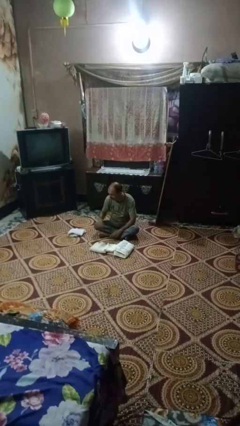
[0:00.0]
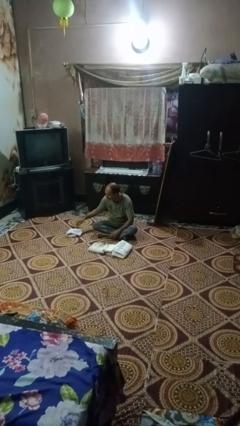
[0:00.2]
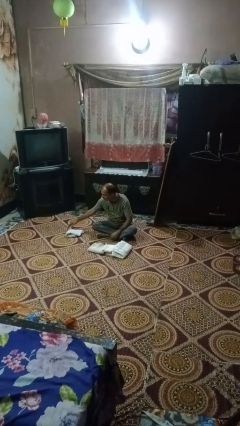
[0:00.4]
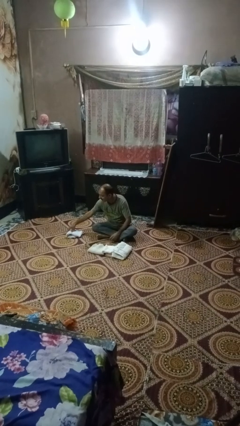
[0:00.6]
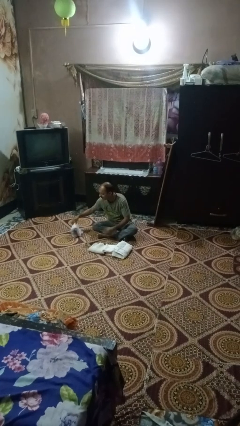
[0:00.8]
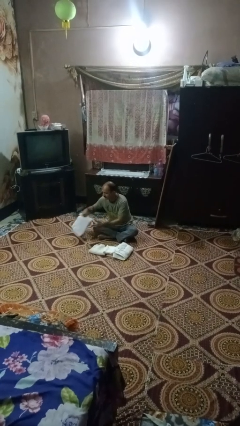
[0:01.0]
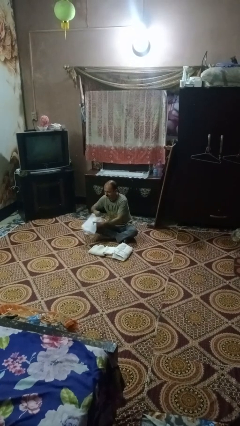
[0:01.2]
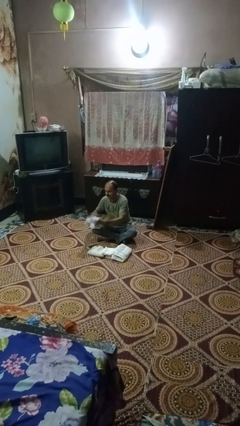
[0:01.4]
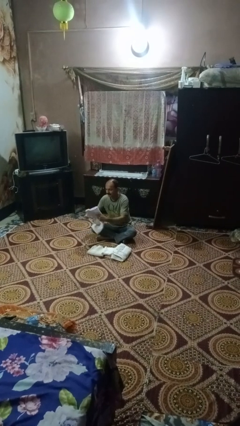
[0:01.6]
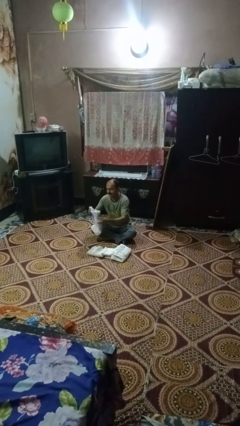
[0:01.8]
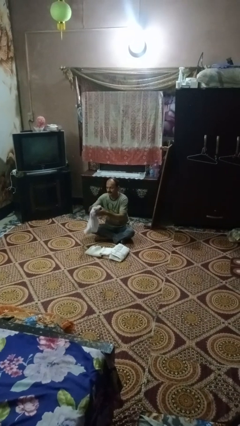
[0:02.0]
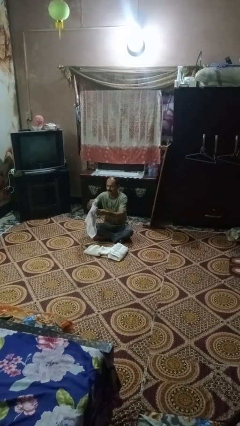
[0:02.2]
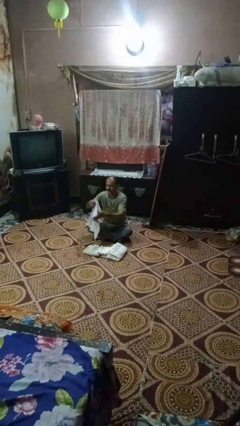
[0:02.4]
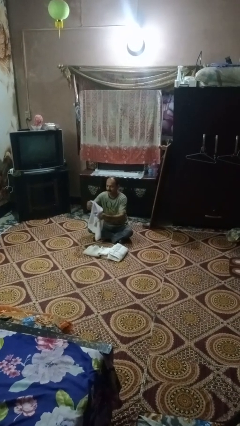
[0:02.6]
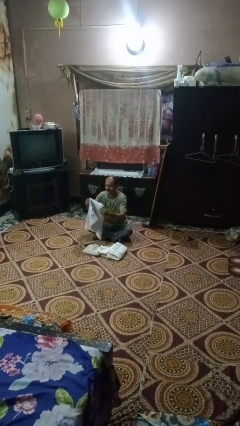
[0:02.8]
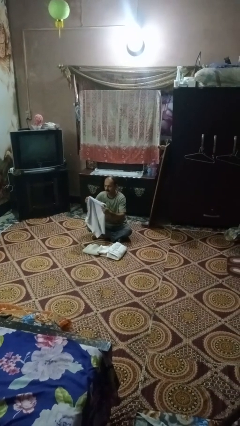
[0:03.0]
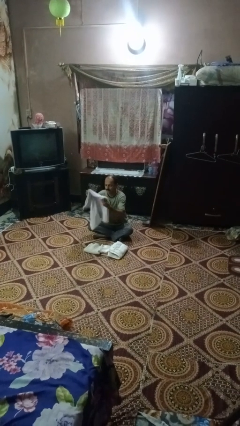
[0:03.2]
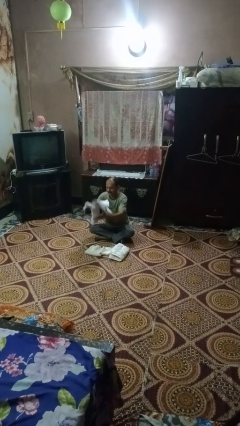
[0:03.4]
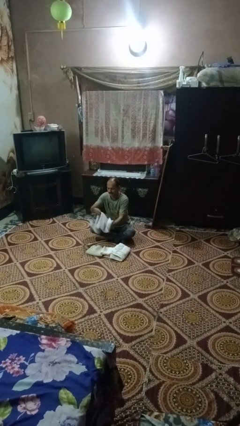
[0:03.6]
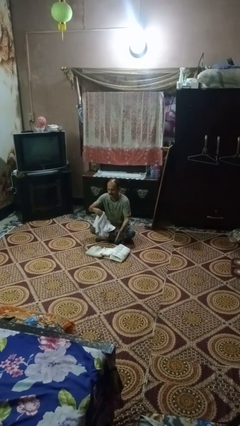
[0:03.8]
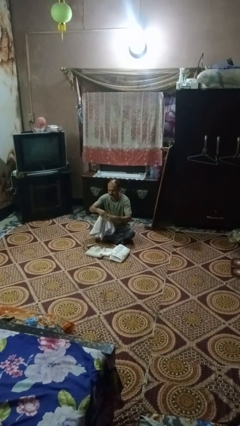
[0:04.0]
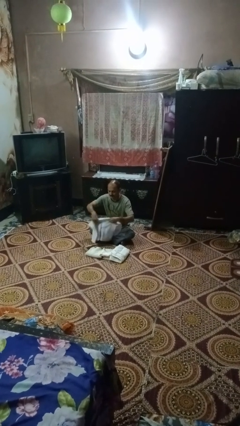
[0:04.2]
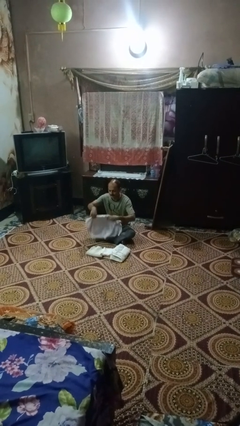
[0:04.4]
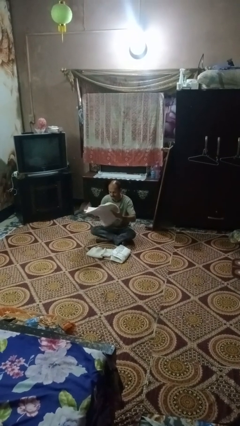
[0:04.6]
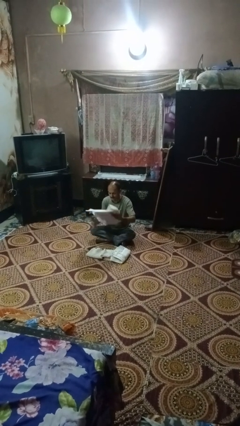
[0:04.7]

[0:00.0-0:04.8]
person folds towel

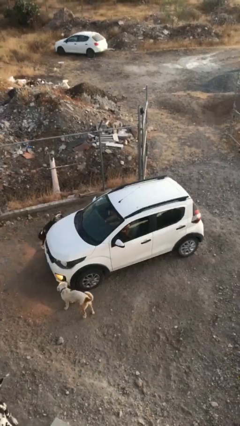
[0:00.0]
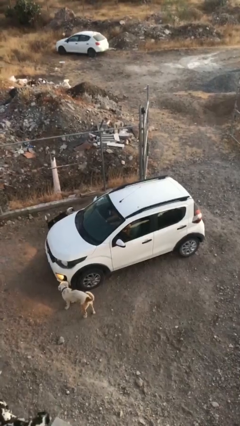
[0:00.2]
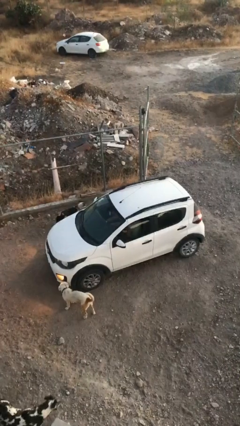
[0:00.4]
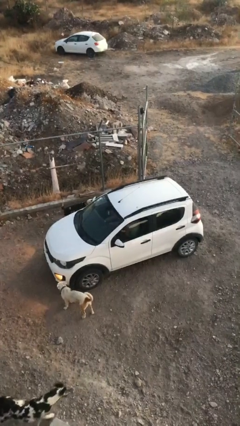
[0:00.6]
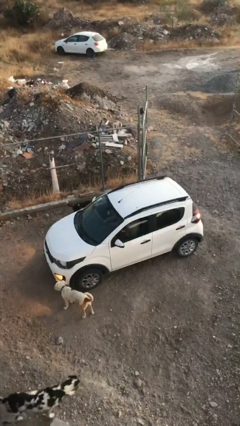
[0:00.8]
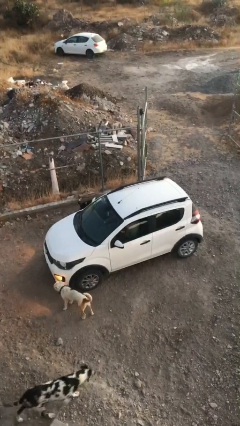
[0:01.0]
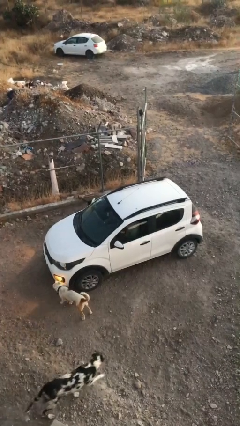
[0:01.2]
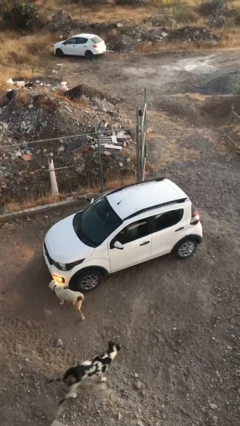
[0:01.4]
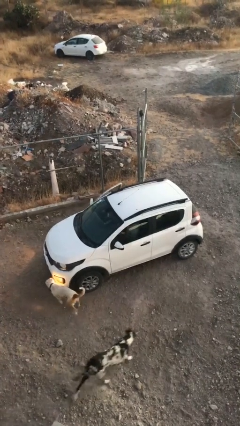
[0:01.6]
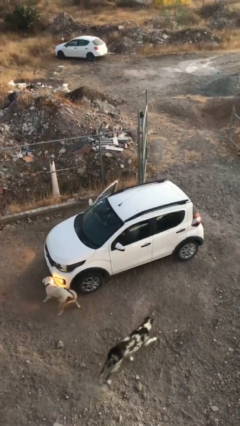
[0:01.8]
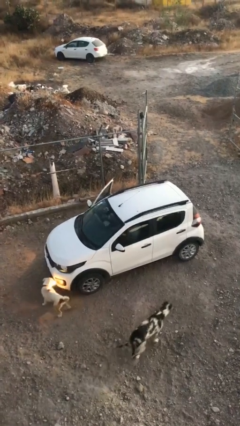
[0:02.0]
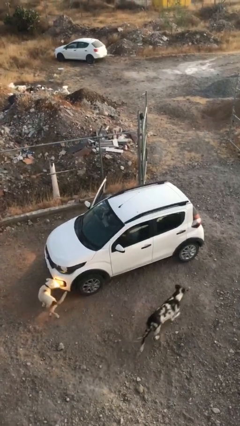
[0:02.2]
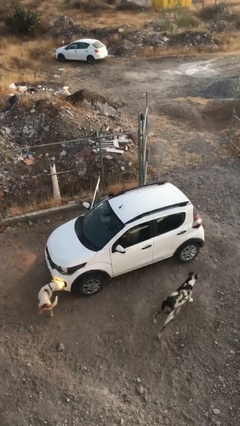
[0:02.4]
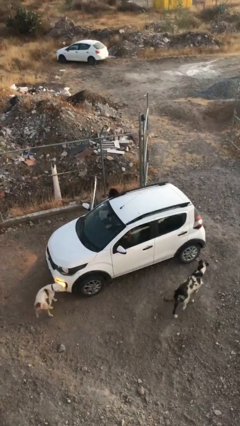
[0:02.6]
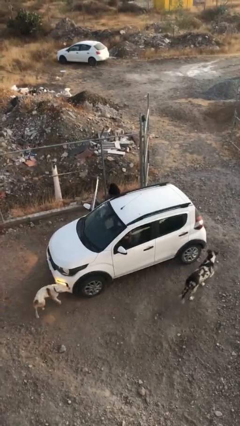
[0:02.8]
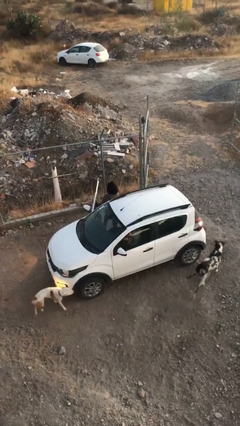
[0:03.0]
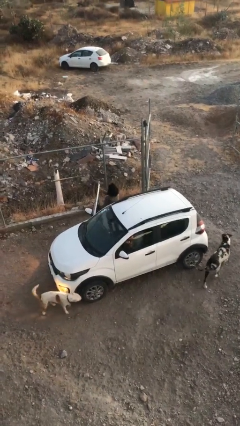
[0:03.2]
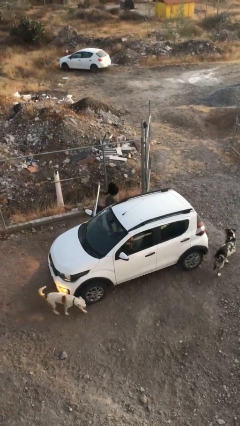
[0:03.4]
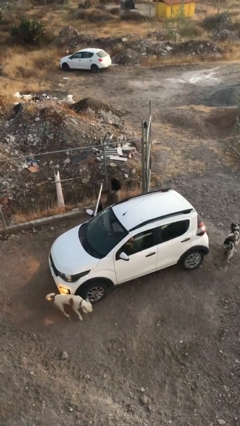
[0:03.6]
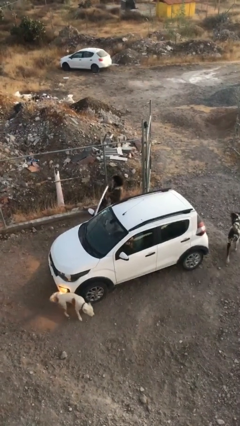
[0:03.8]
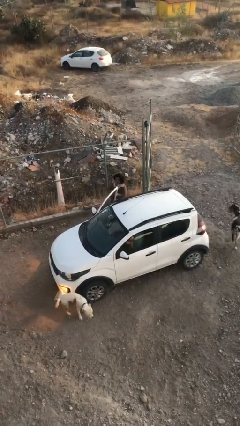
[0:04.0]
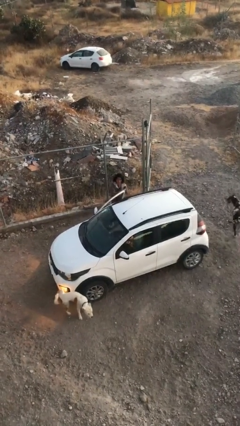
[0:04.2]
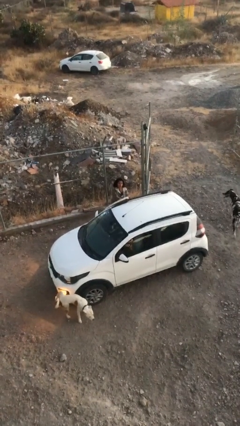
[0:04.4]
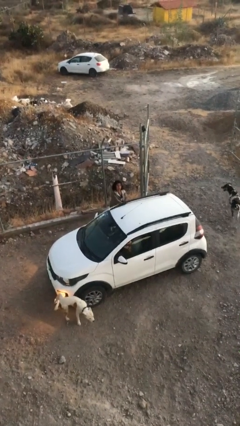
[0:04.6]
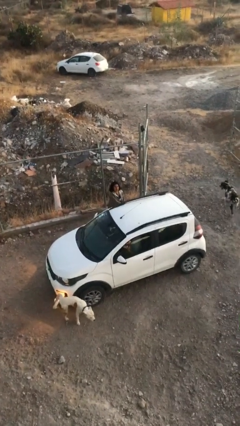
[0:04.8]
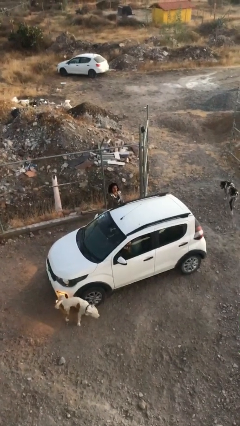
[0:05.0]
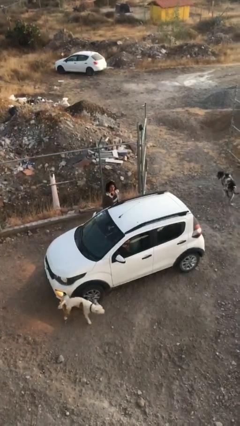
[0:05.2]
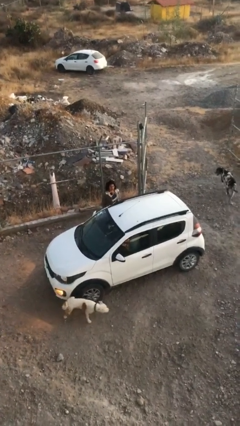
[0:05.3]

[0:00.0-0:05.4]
car drops off person

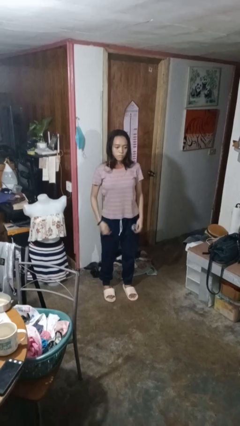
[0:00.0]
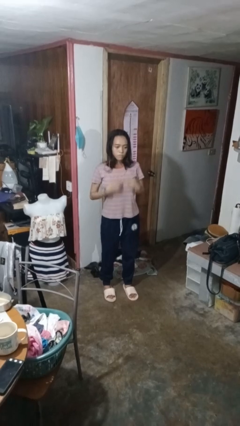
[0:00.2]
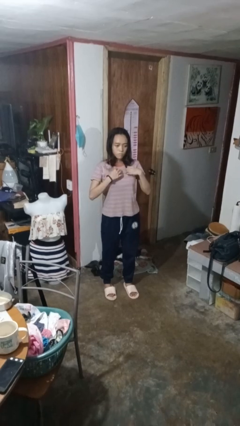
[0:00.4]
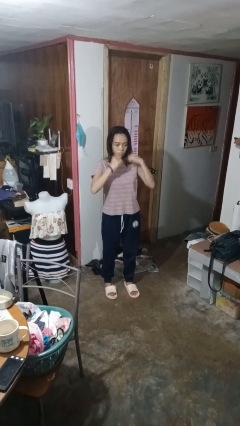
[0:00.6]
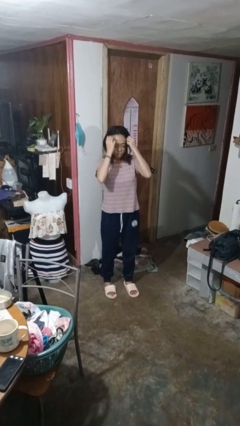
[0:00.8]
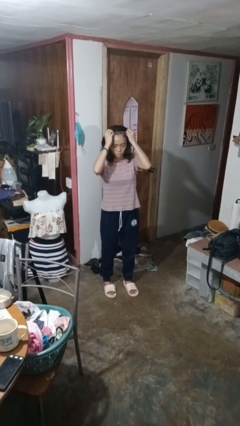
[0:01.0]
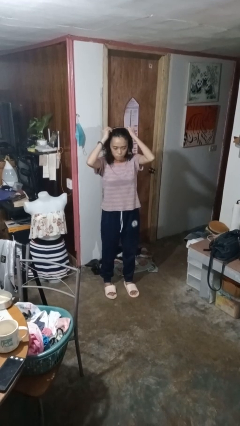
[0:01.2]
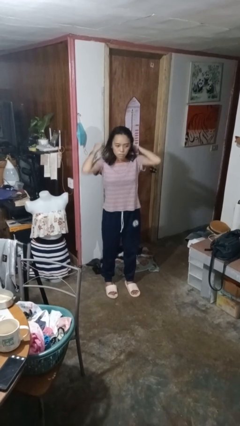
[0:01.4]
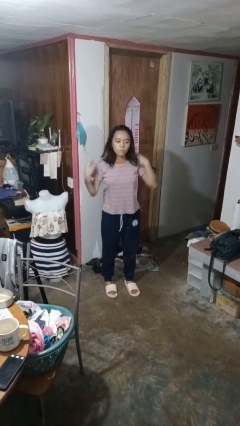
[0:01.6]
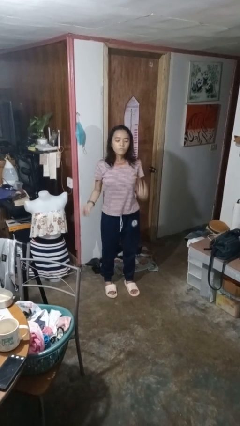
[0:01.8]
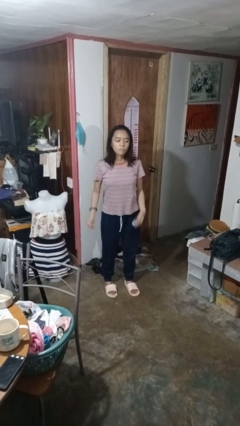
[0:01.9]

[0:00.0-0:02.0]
person takes off necklace

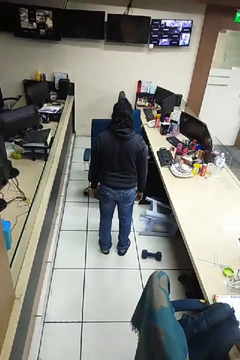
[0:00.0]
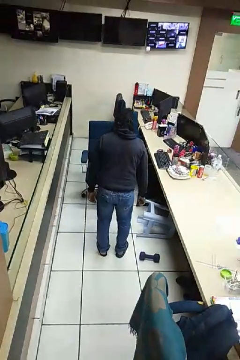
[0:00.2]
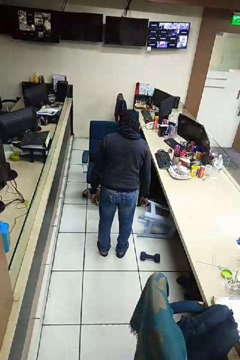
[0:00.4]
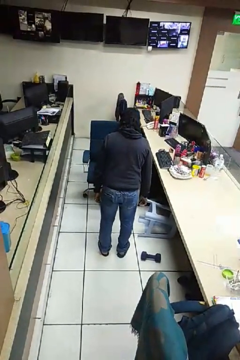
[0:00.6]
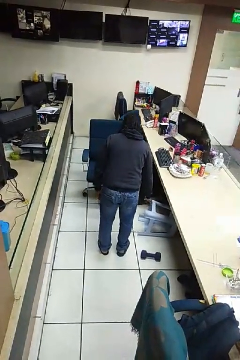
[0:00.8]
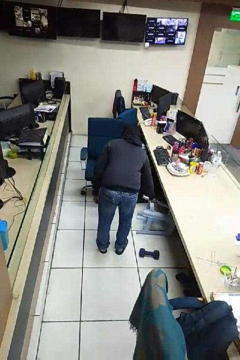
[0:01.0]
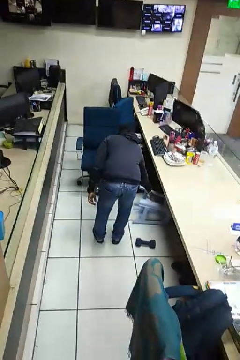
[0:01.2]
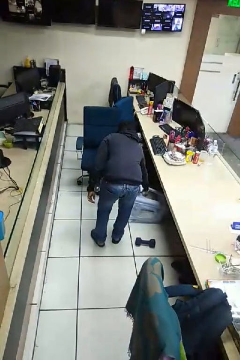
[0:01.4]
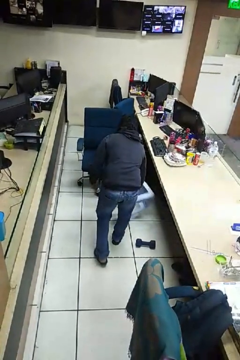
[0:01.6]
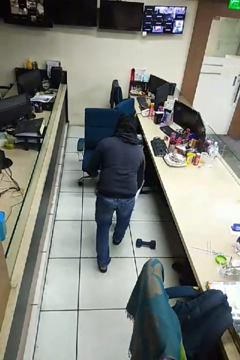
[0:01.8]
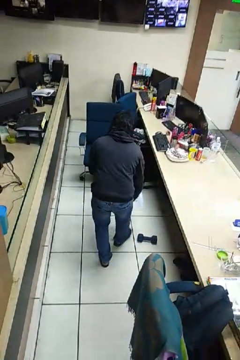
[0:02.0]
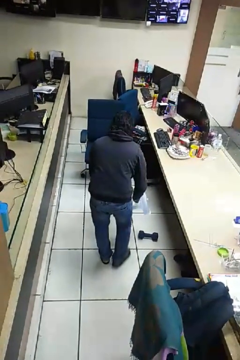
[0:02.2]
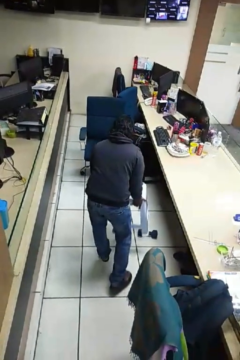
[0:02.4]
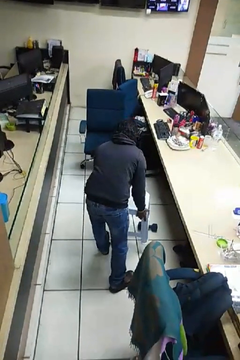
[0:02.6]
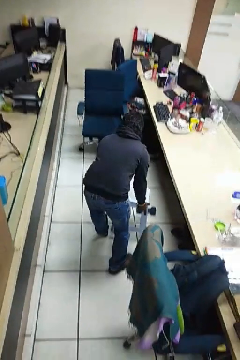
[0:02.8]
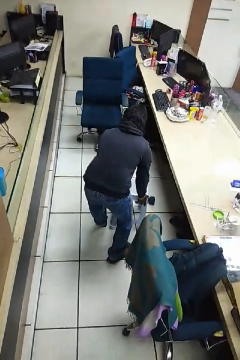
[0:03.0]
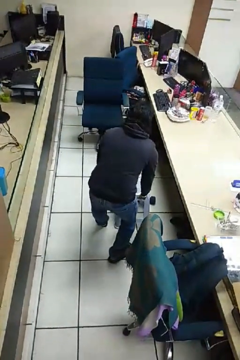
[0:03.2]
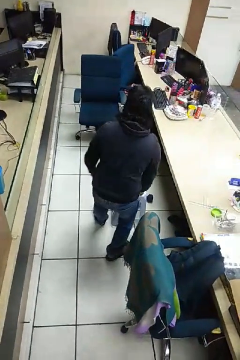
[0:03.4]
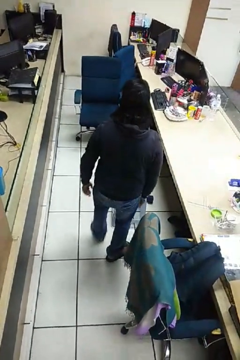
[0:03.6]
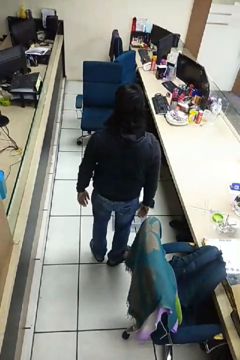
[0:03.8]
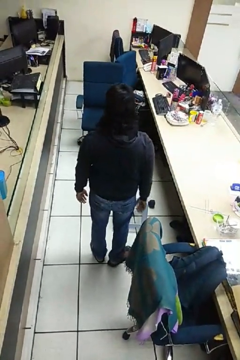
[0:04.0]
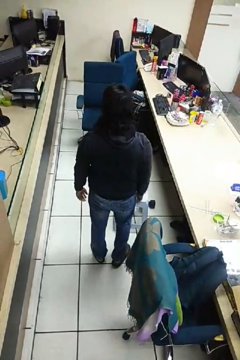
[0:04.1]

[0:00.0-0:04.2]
person sets upright furniture

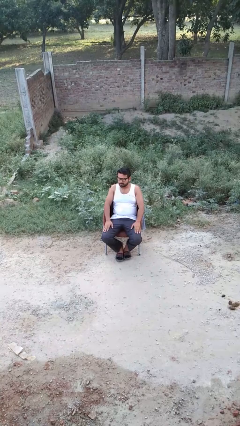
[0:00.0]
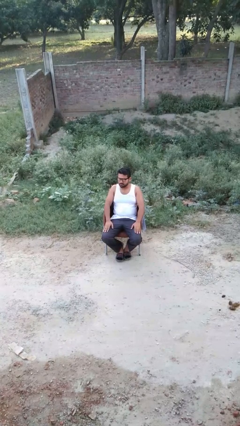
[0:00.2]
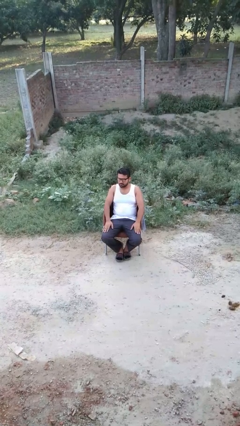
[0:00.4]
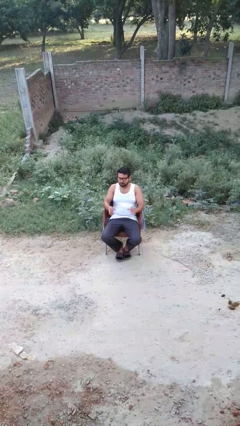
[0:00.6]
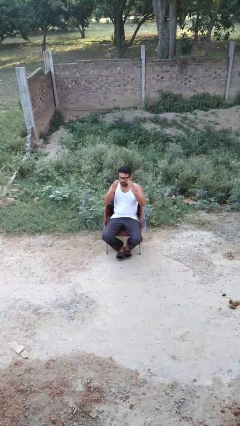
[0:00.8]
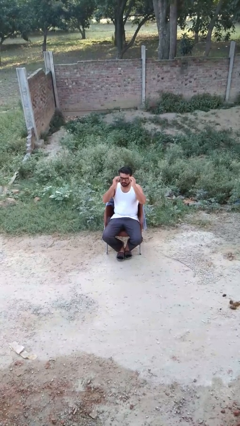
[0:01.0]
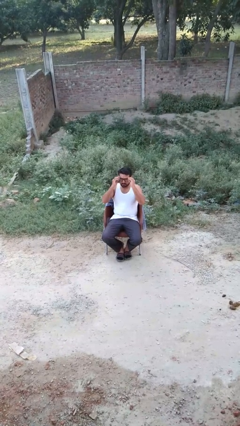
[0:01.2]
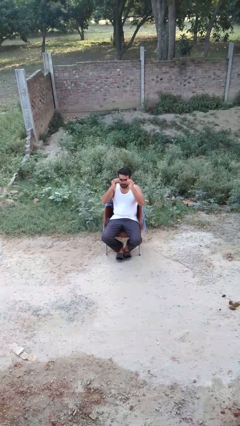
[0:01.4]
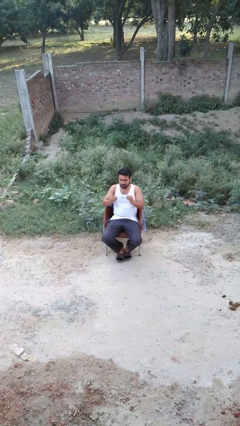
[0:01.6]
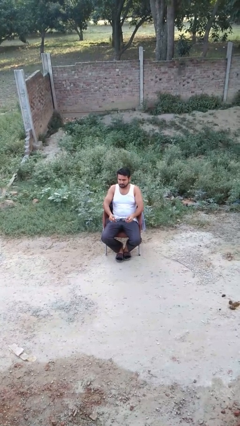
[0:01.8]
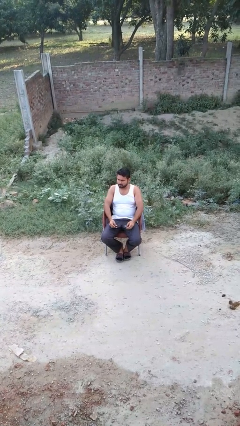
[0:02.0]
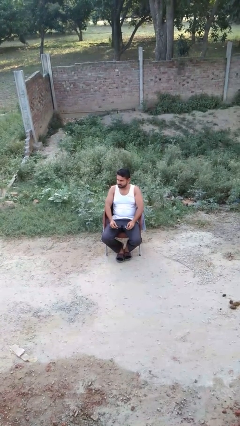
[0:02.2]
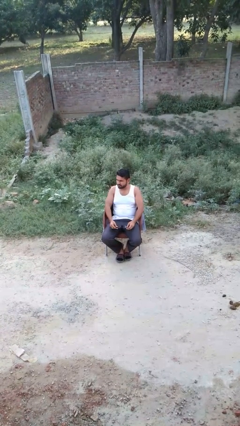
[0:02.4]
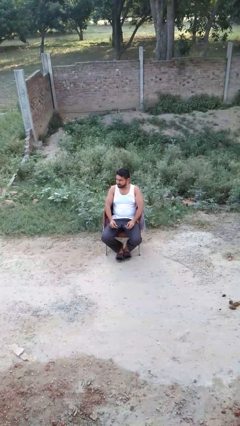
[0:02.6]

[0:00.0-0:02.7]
person takes off glasses
